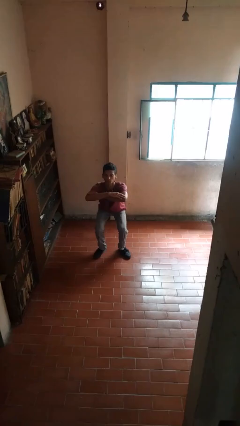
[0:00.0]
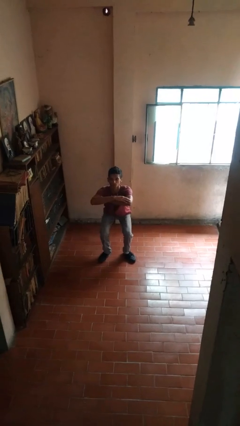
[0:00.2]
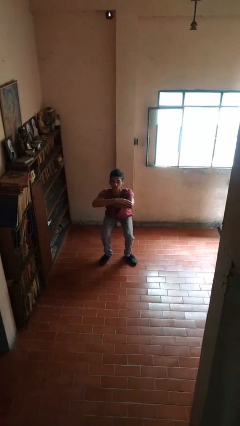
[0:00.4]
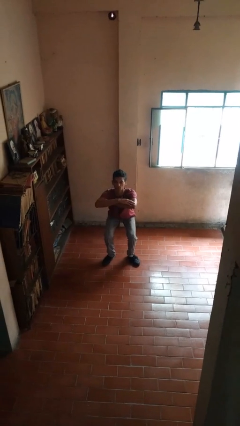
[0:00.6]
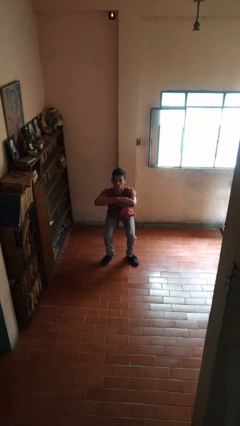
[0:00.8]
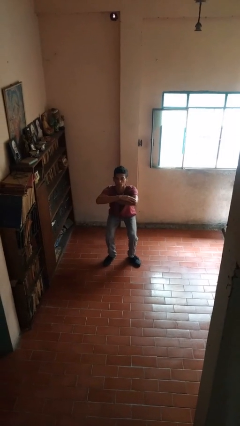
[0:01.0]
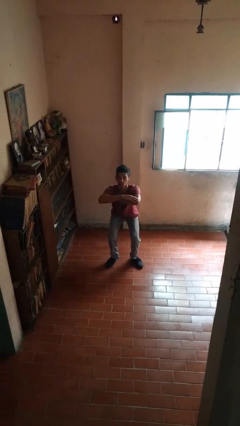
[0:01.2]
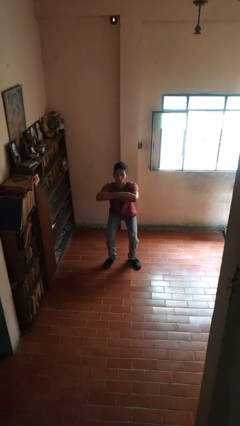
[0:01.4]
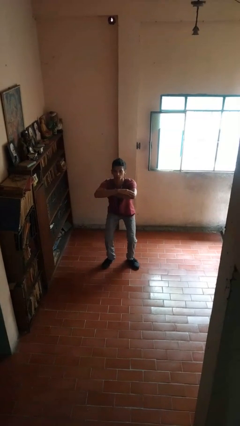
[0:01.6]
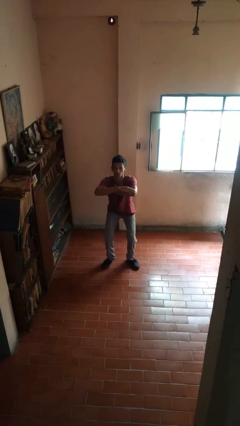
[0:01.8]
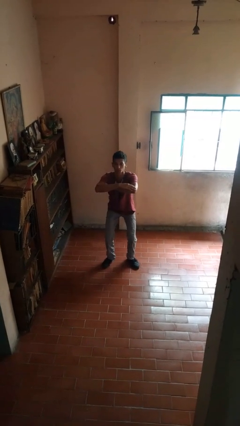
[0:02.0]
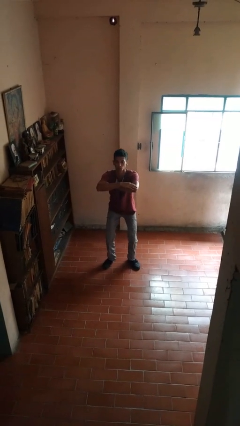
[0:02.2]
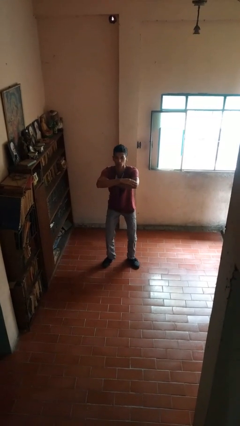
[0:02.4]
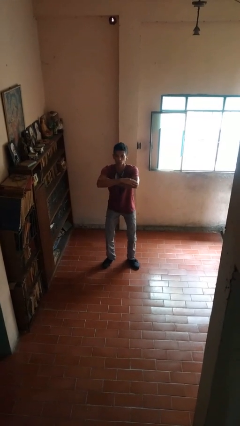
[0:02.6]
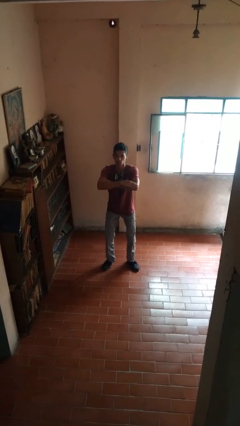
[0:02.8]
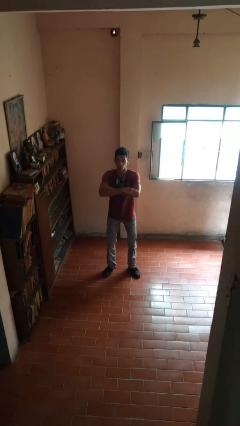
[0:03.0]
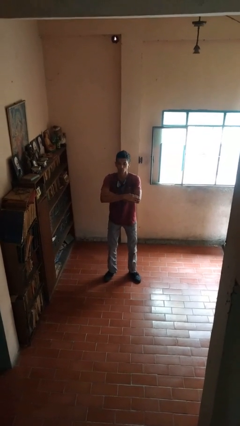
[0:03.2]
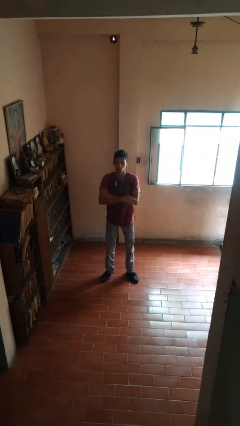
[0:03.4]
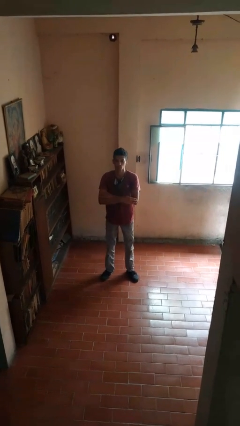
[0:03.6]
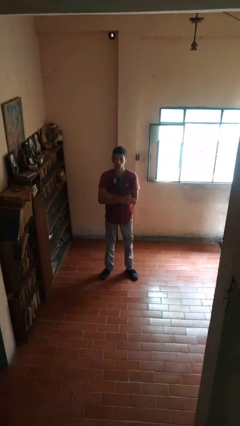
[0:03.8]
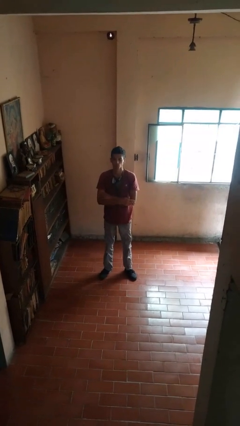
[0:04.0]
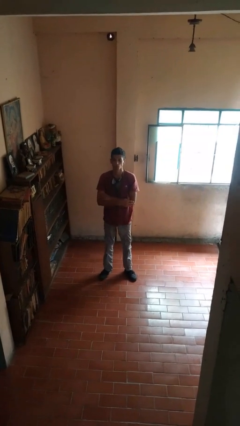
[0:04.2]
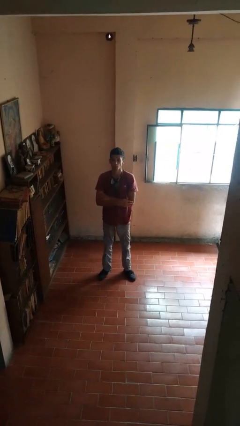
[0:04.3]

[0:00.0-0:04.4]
person stands up

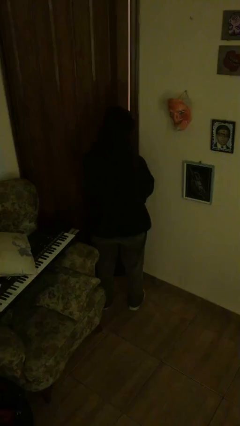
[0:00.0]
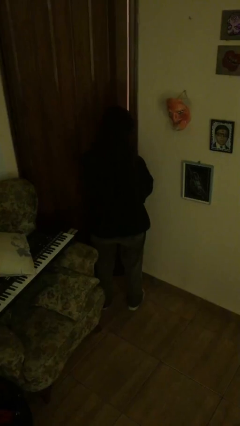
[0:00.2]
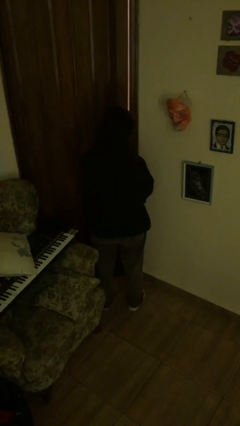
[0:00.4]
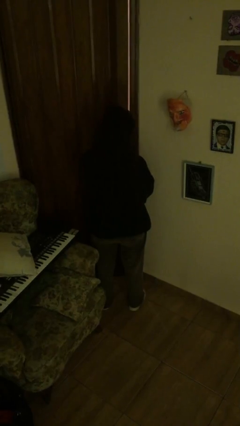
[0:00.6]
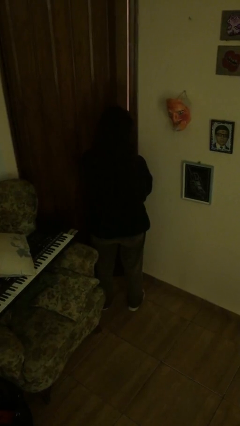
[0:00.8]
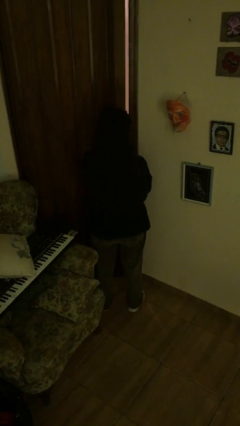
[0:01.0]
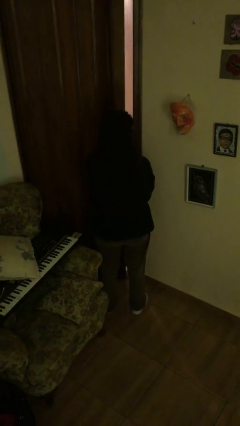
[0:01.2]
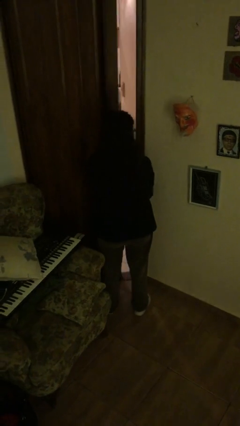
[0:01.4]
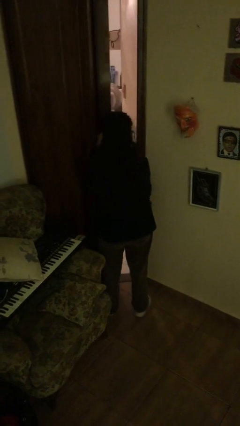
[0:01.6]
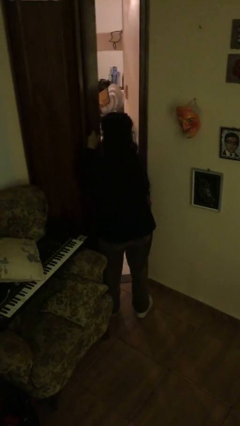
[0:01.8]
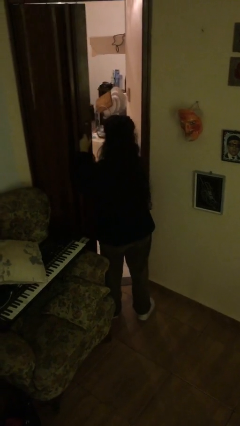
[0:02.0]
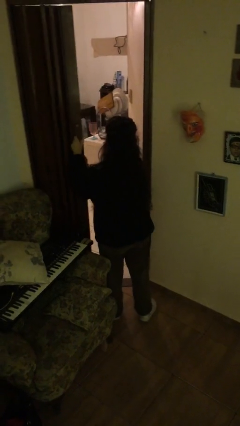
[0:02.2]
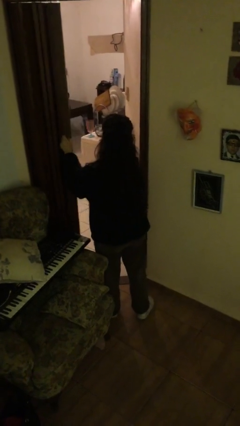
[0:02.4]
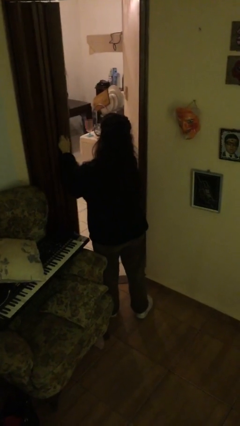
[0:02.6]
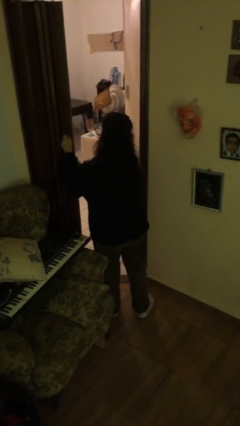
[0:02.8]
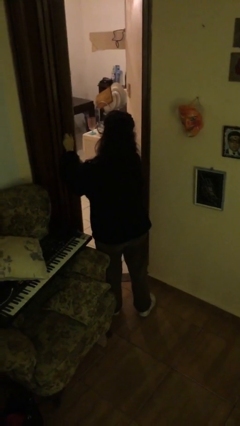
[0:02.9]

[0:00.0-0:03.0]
person opens sliding door

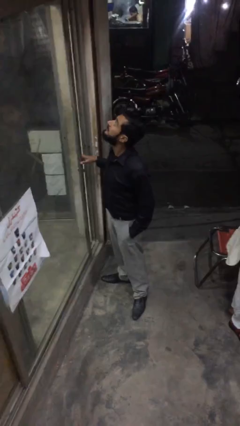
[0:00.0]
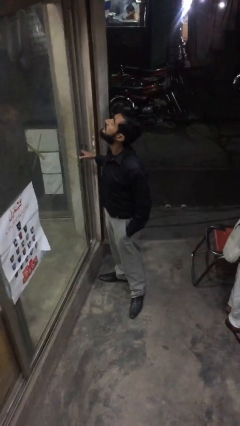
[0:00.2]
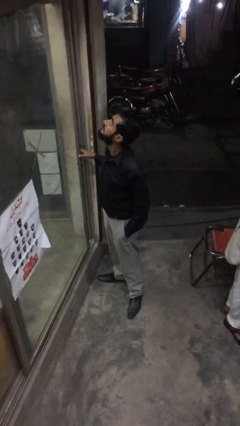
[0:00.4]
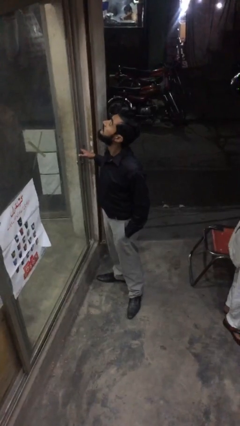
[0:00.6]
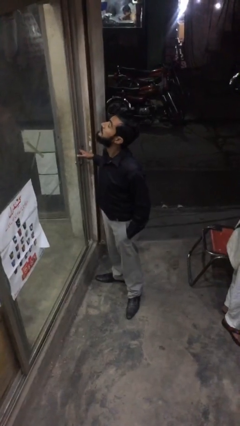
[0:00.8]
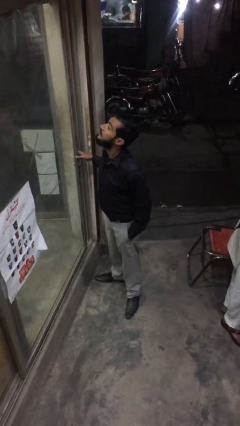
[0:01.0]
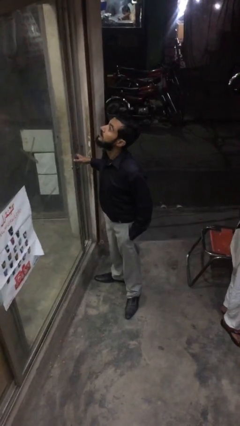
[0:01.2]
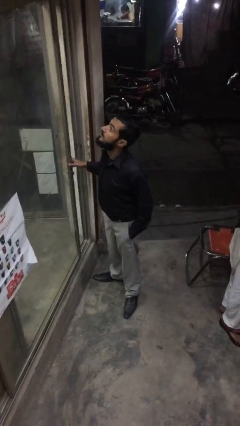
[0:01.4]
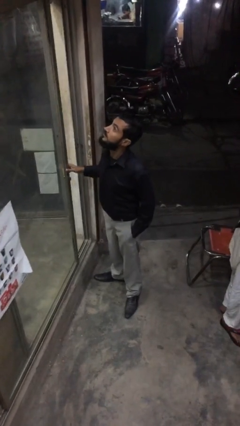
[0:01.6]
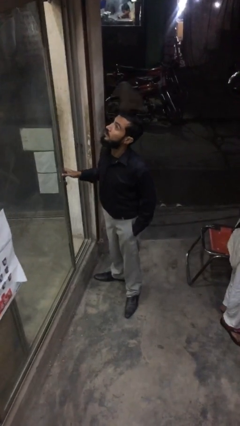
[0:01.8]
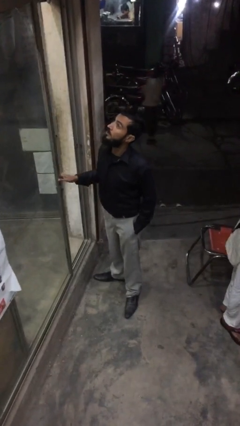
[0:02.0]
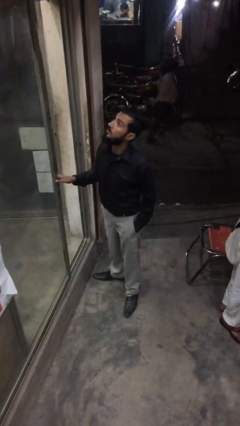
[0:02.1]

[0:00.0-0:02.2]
person opens facility door

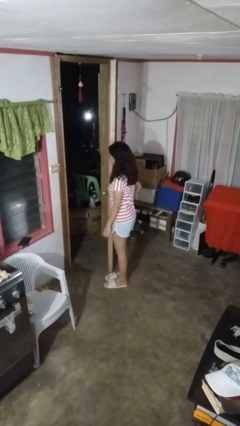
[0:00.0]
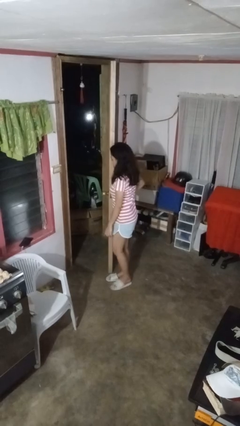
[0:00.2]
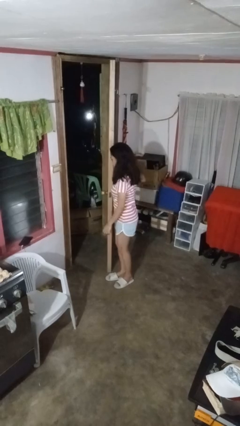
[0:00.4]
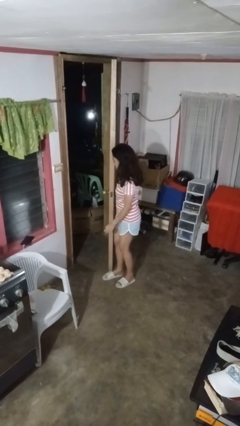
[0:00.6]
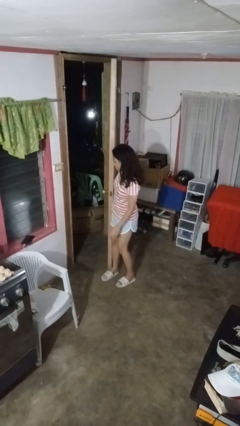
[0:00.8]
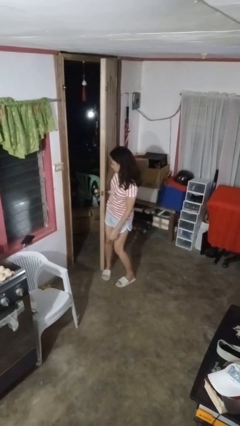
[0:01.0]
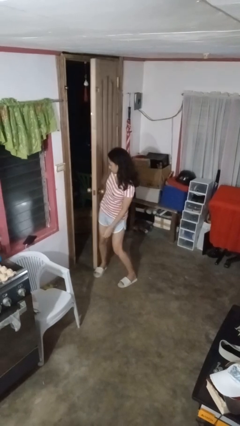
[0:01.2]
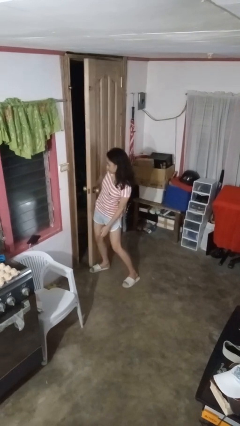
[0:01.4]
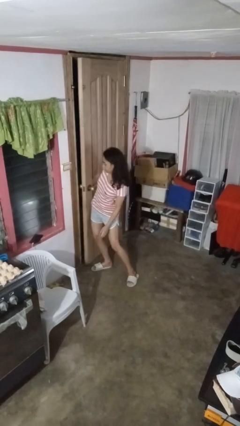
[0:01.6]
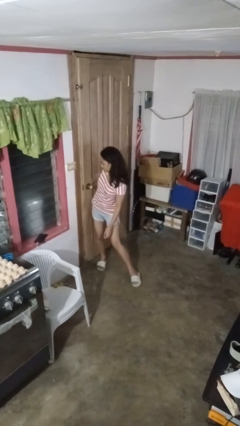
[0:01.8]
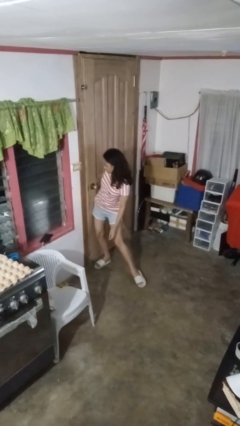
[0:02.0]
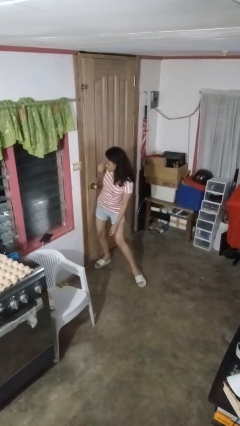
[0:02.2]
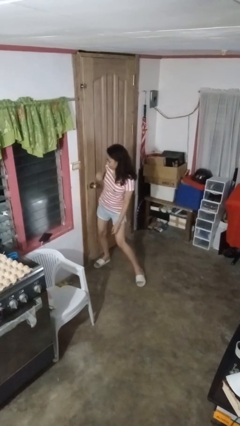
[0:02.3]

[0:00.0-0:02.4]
person closes door with hip

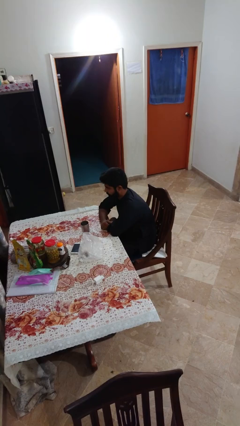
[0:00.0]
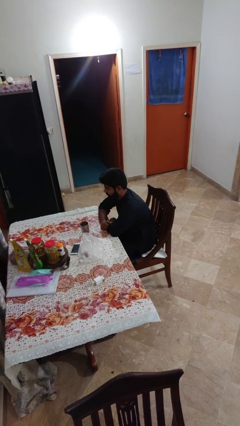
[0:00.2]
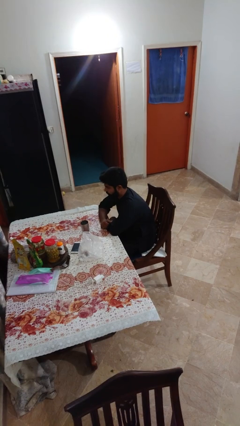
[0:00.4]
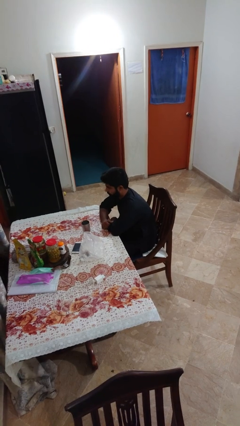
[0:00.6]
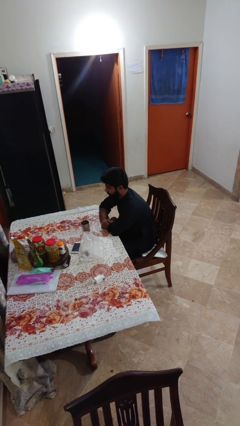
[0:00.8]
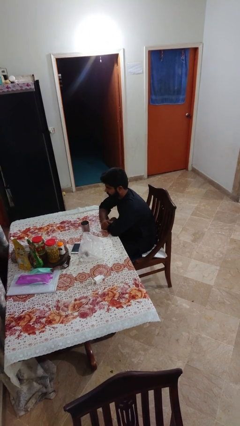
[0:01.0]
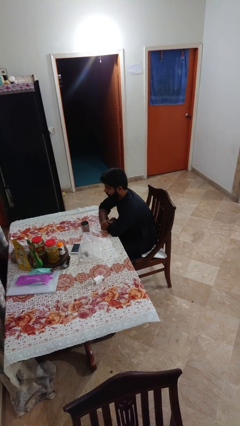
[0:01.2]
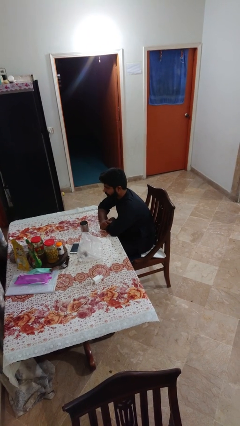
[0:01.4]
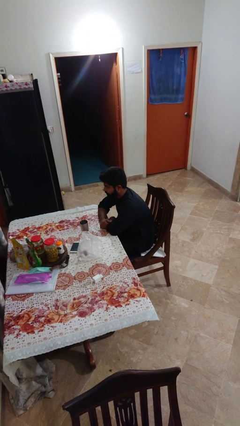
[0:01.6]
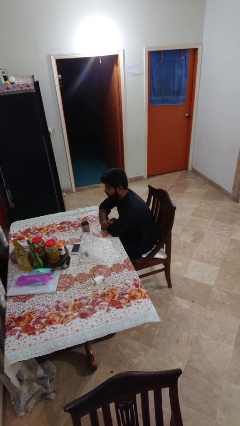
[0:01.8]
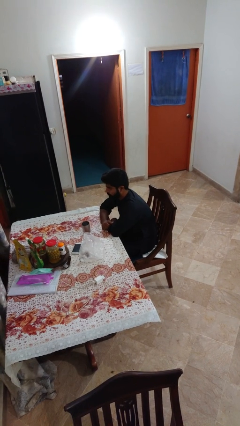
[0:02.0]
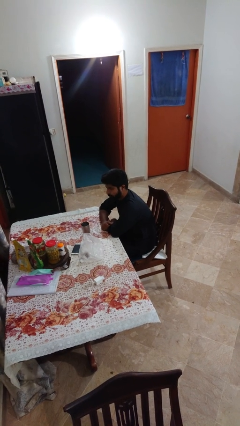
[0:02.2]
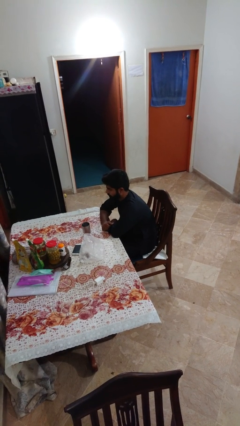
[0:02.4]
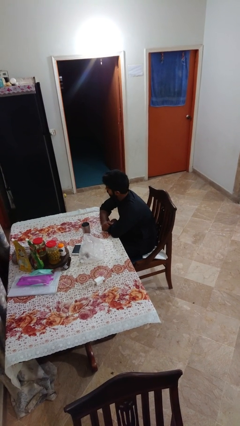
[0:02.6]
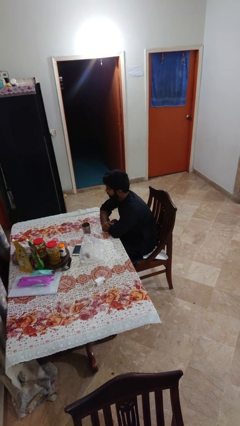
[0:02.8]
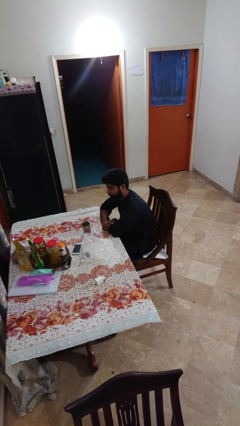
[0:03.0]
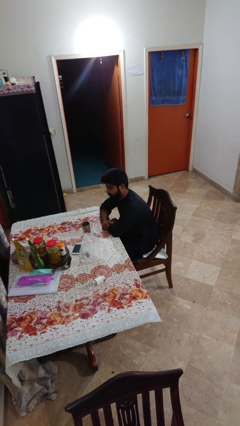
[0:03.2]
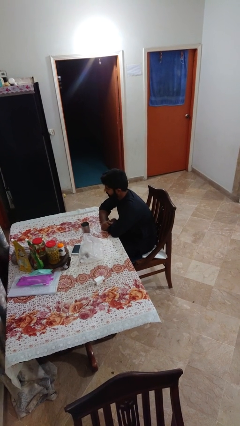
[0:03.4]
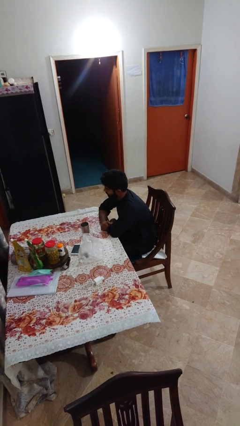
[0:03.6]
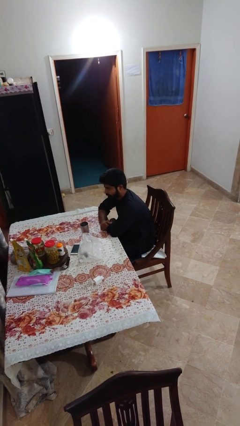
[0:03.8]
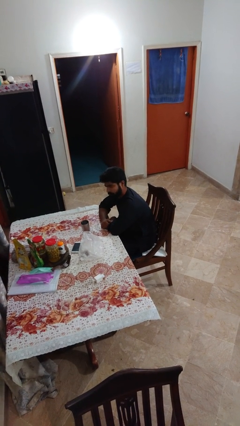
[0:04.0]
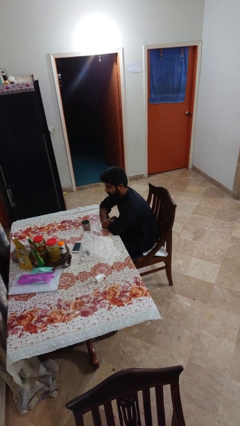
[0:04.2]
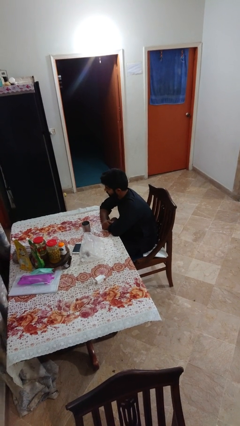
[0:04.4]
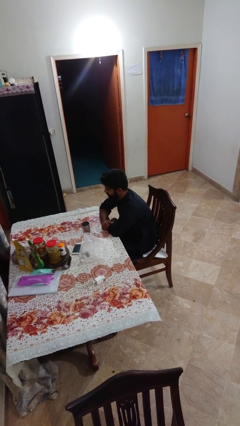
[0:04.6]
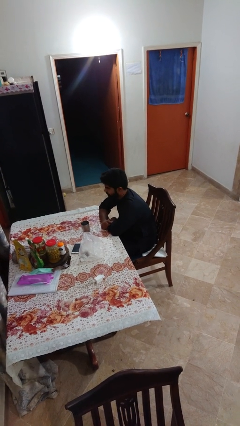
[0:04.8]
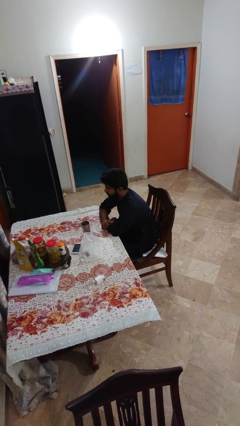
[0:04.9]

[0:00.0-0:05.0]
person shakes head

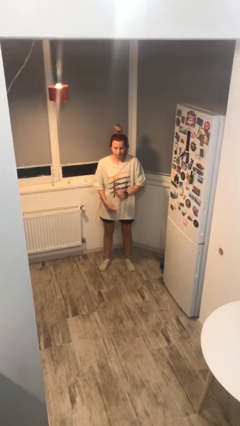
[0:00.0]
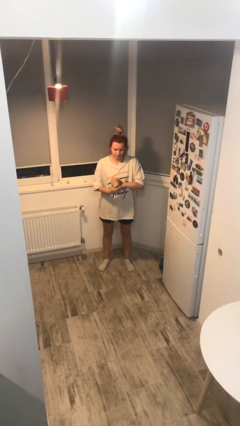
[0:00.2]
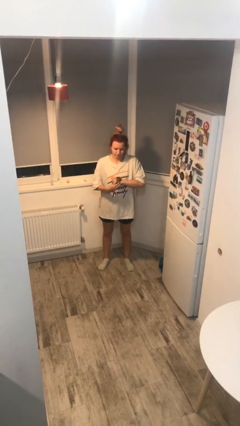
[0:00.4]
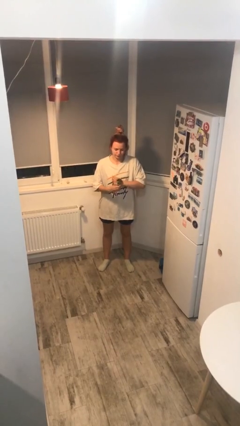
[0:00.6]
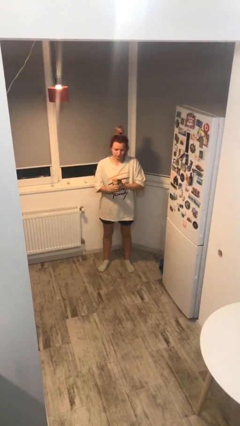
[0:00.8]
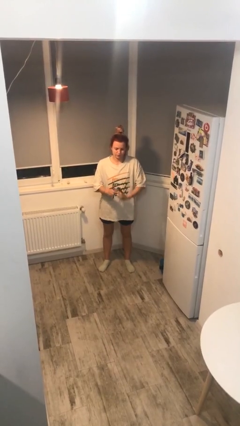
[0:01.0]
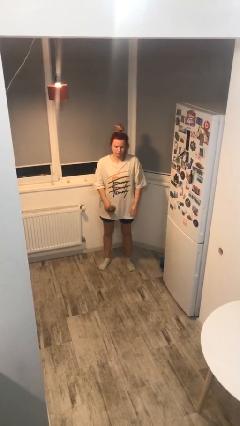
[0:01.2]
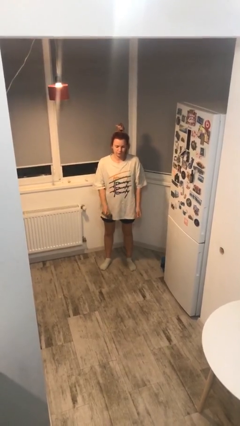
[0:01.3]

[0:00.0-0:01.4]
person takes off wristwatch
